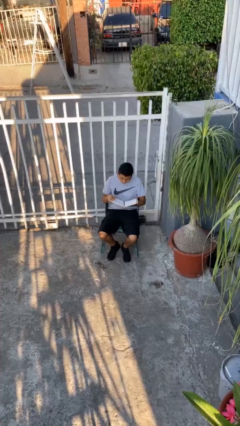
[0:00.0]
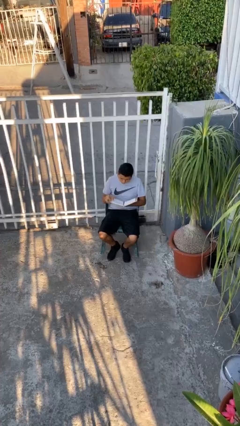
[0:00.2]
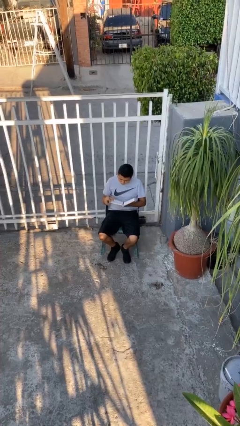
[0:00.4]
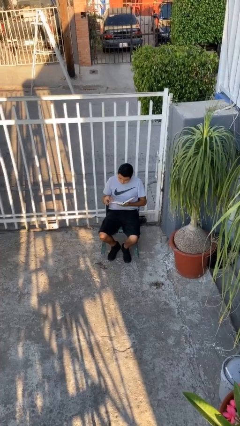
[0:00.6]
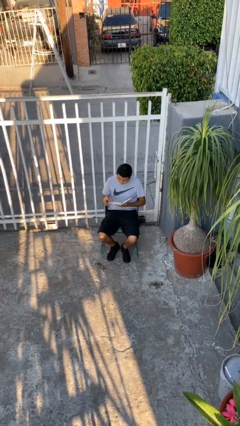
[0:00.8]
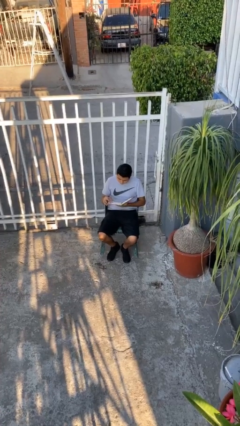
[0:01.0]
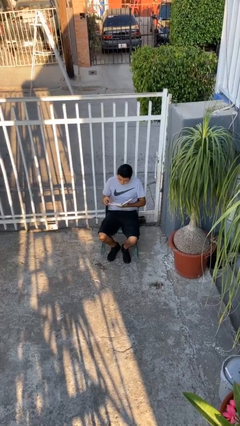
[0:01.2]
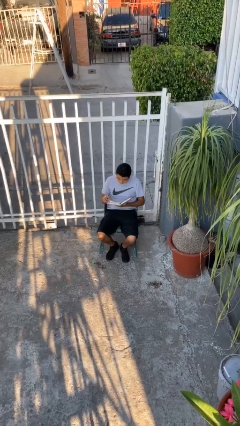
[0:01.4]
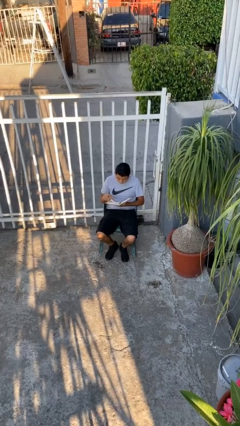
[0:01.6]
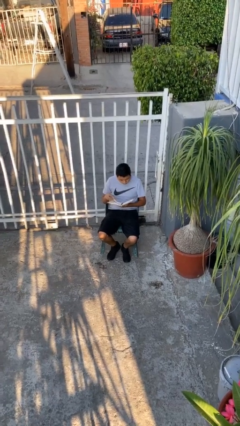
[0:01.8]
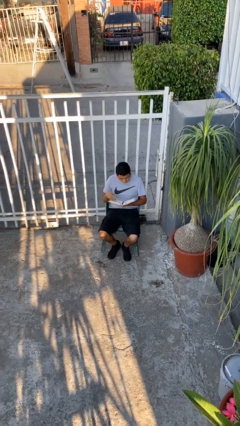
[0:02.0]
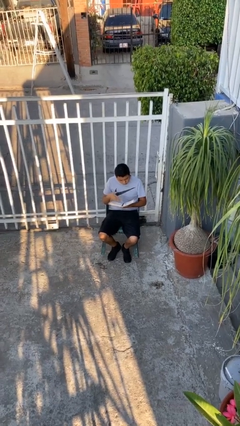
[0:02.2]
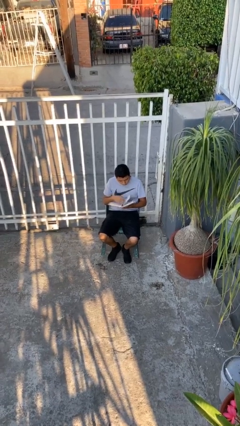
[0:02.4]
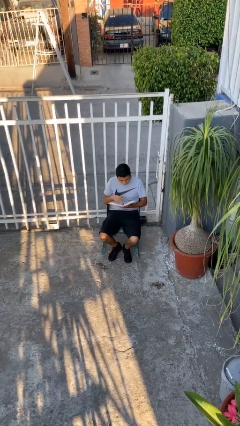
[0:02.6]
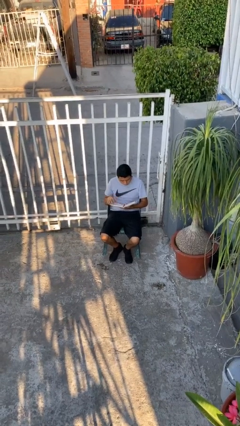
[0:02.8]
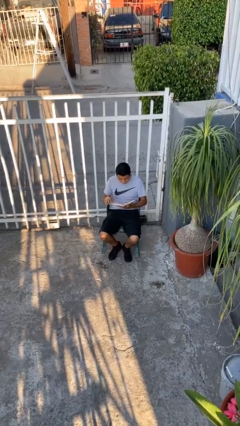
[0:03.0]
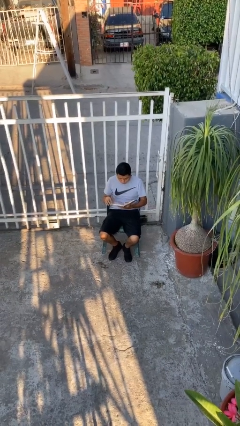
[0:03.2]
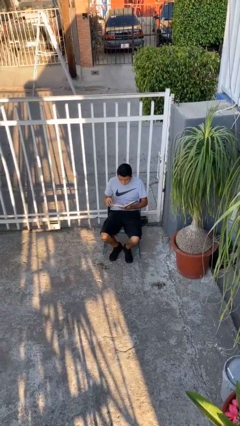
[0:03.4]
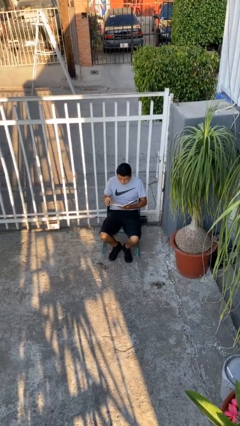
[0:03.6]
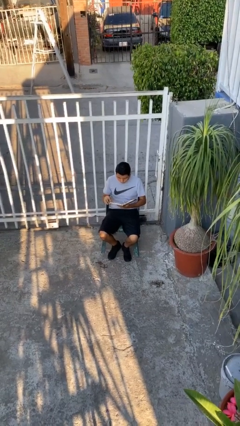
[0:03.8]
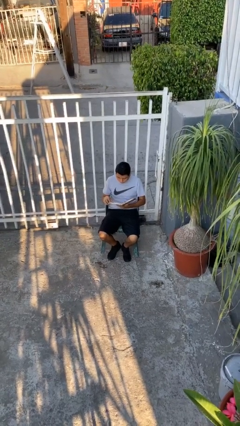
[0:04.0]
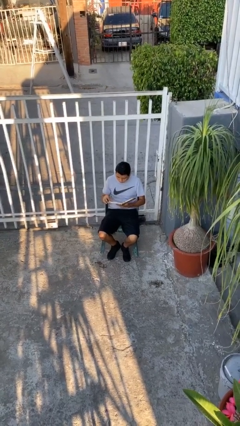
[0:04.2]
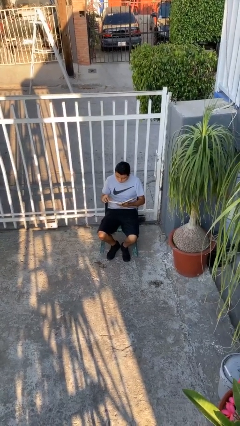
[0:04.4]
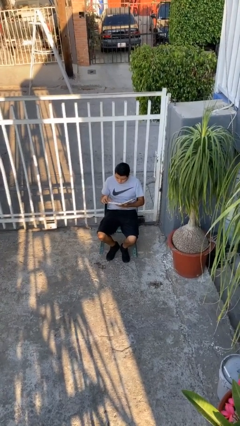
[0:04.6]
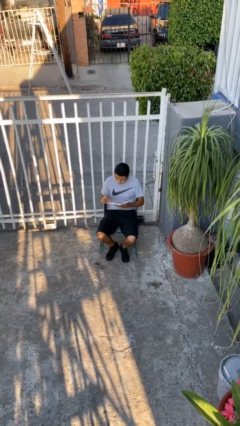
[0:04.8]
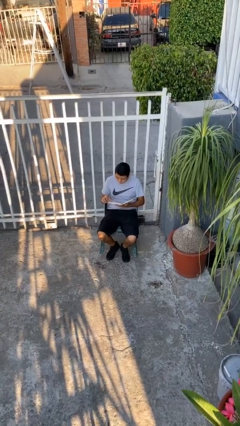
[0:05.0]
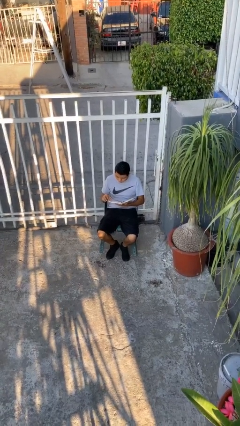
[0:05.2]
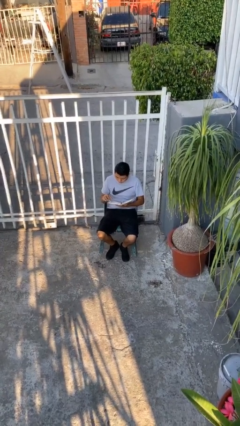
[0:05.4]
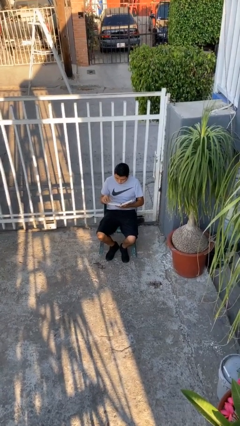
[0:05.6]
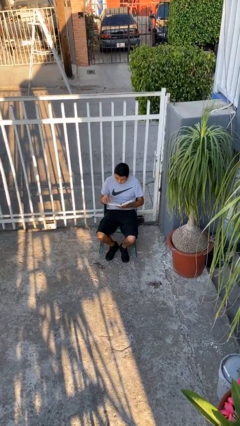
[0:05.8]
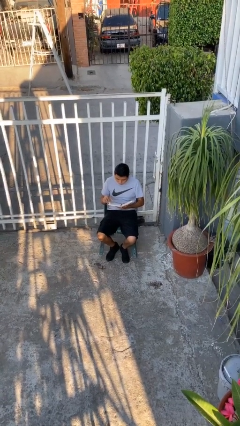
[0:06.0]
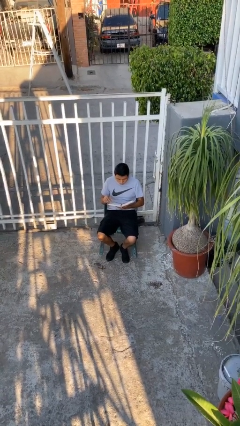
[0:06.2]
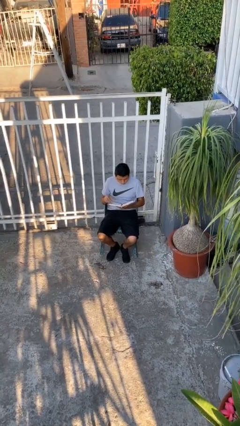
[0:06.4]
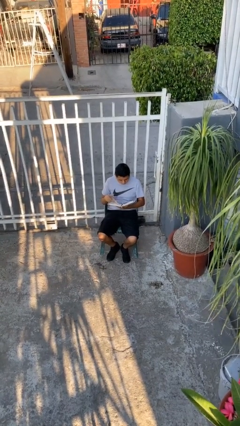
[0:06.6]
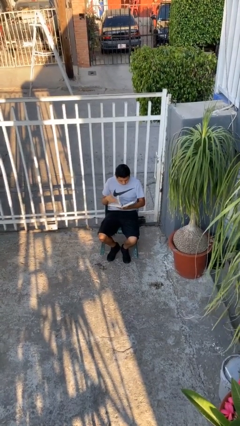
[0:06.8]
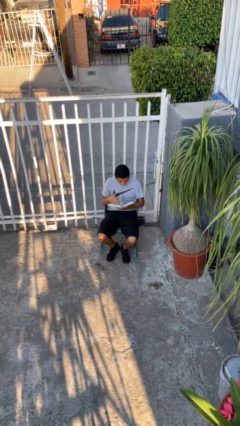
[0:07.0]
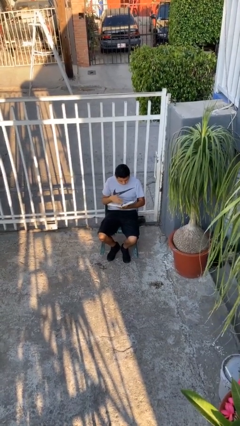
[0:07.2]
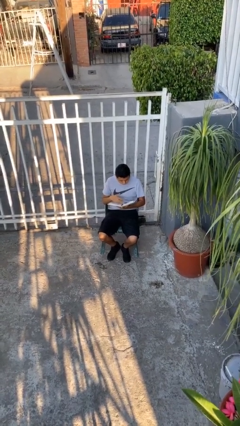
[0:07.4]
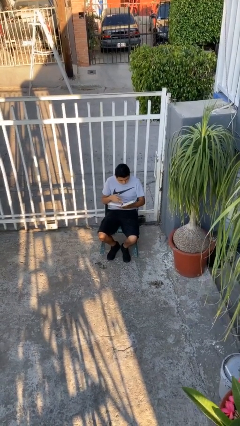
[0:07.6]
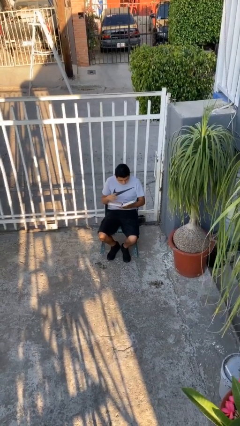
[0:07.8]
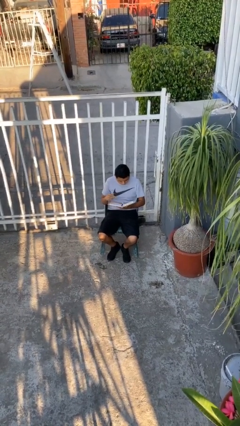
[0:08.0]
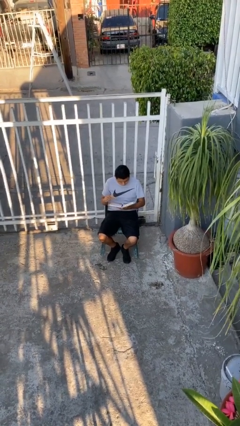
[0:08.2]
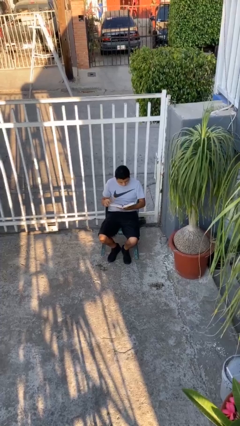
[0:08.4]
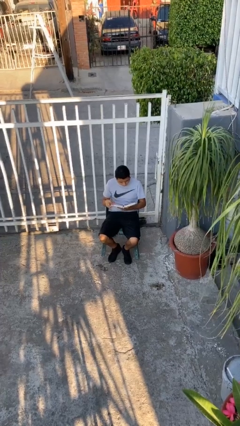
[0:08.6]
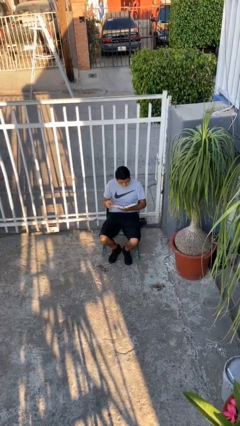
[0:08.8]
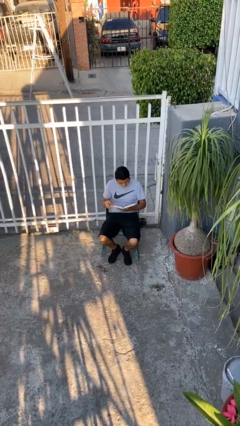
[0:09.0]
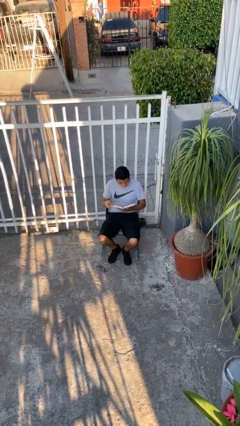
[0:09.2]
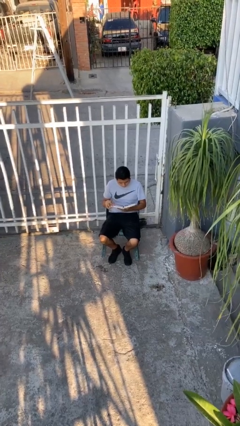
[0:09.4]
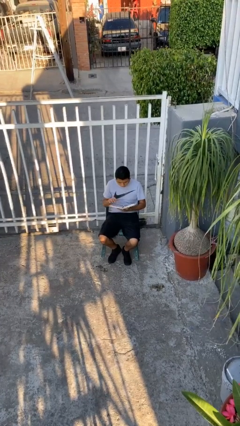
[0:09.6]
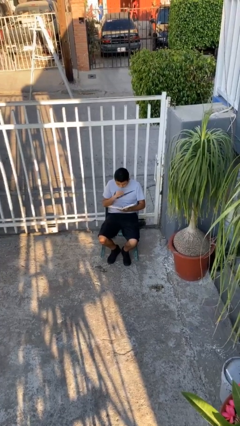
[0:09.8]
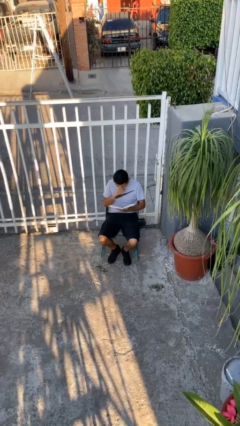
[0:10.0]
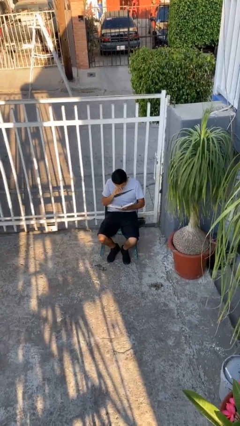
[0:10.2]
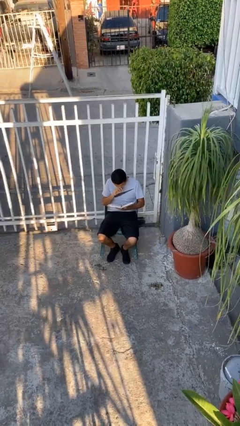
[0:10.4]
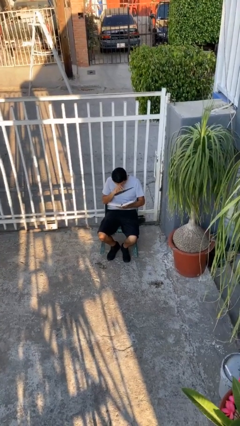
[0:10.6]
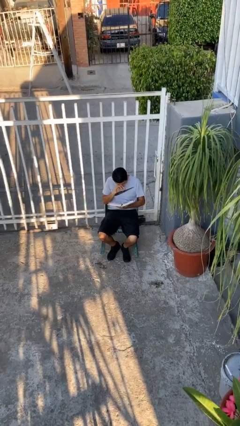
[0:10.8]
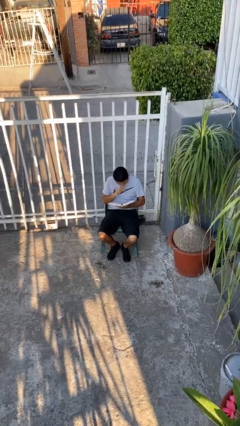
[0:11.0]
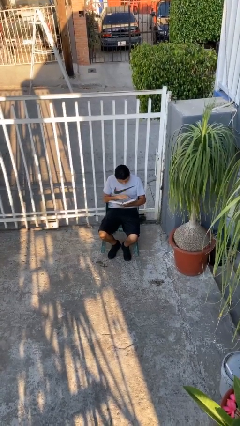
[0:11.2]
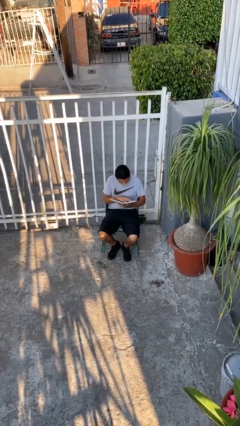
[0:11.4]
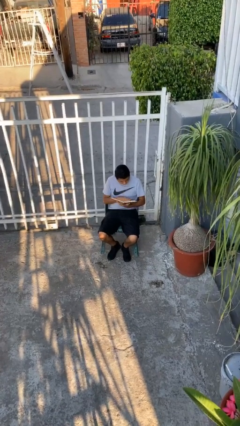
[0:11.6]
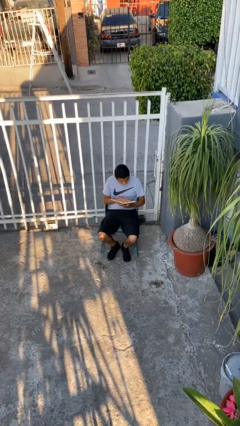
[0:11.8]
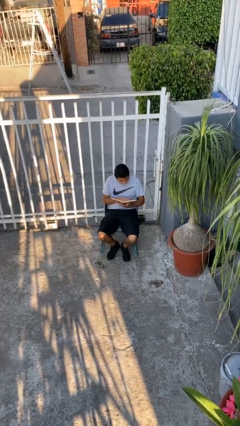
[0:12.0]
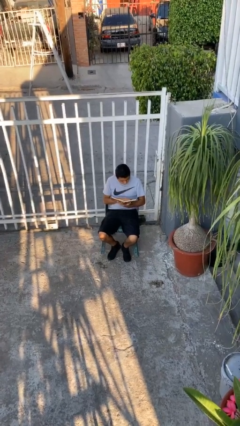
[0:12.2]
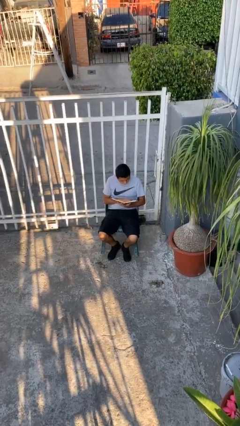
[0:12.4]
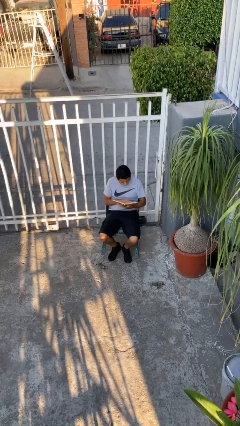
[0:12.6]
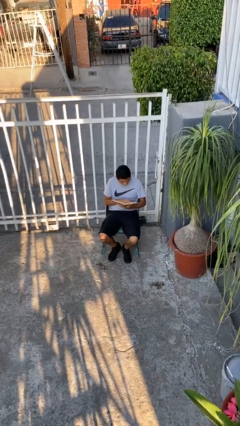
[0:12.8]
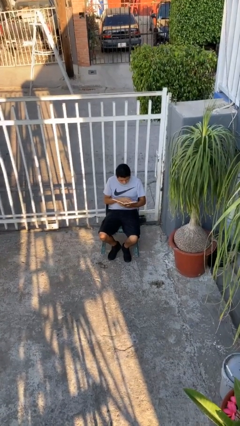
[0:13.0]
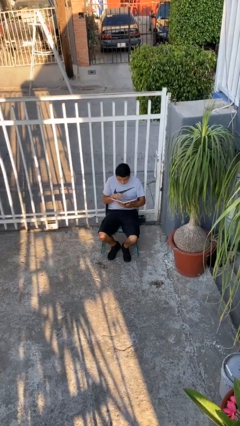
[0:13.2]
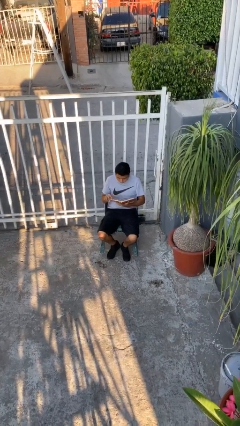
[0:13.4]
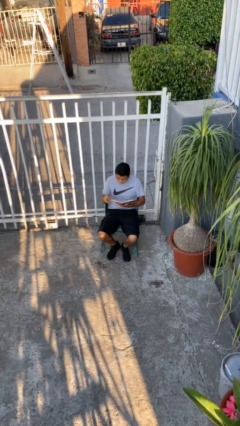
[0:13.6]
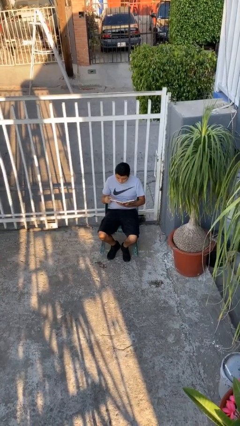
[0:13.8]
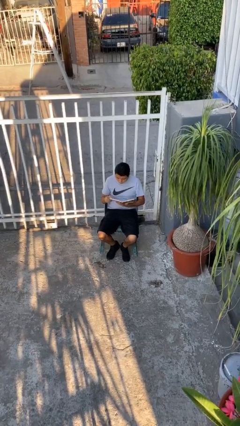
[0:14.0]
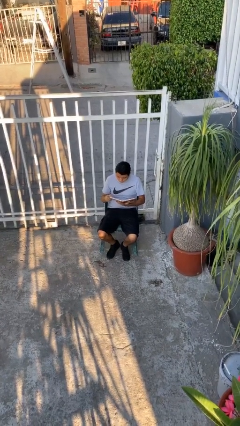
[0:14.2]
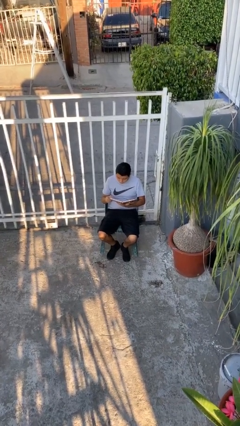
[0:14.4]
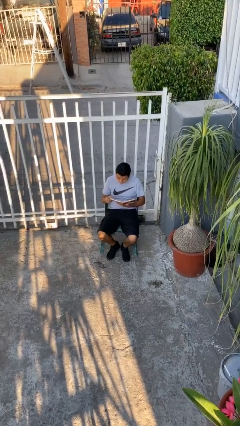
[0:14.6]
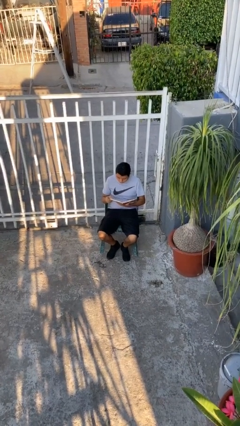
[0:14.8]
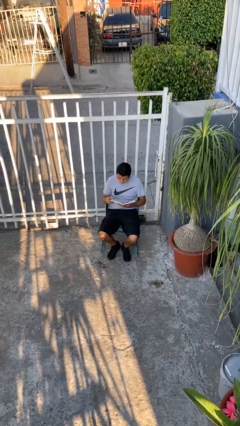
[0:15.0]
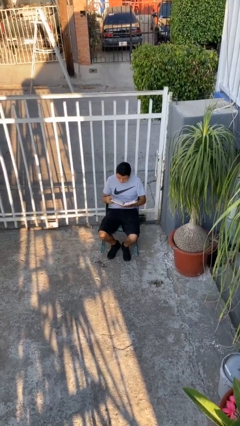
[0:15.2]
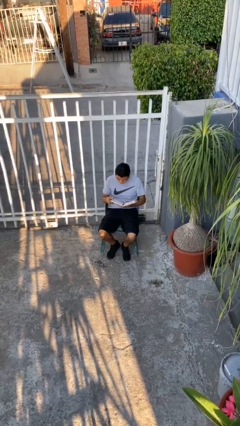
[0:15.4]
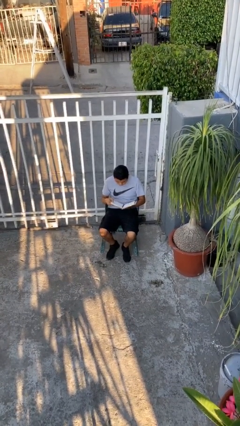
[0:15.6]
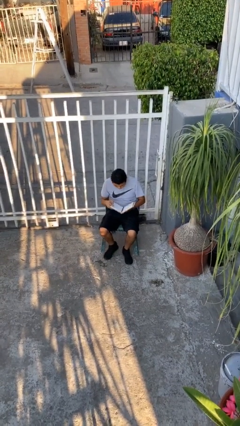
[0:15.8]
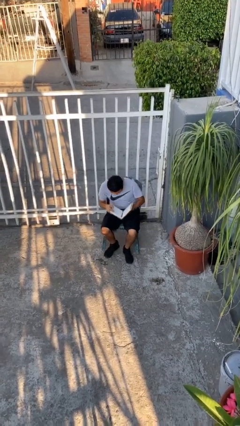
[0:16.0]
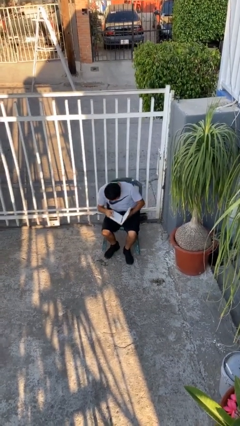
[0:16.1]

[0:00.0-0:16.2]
person reads document

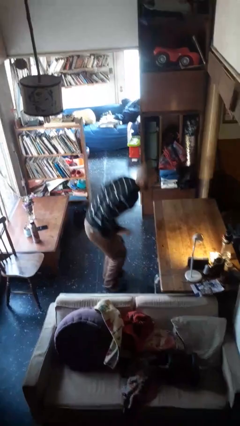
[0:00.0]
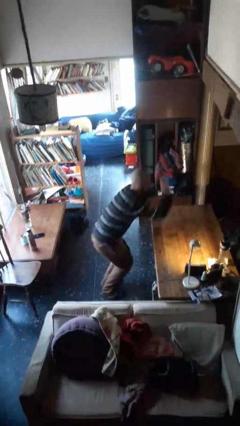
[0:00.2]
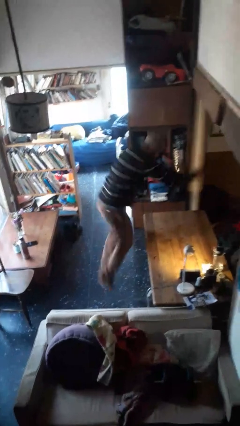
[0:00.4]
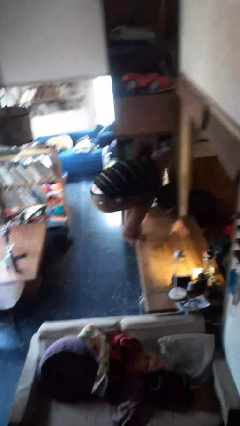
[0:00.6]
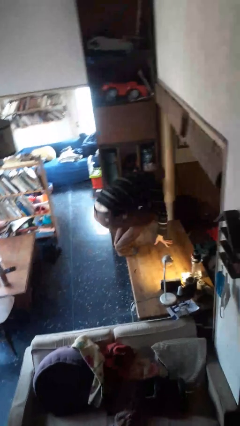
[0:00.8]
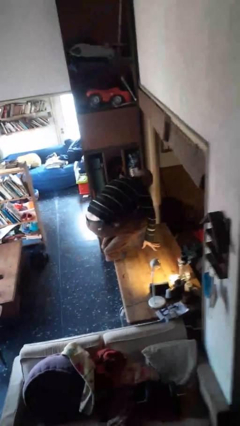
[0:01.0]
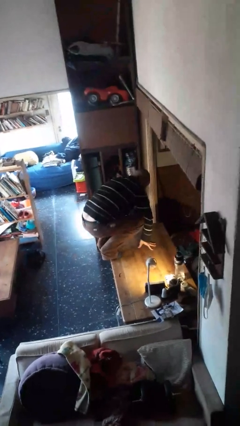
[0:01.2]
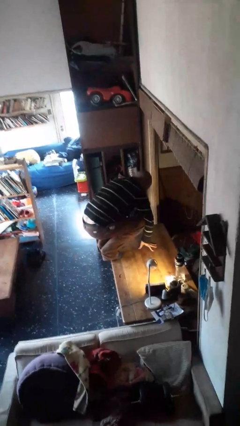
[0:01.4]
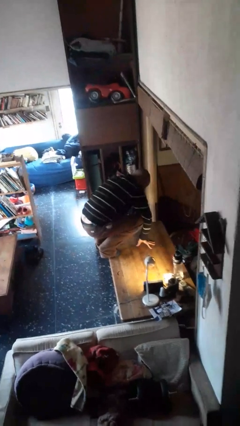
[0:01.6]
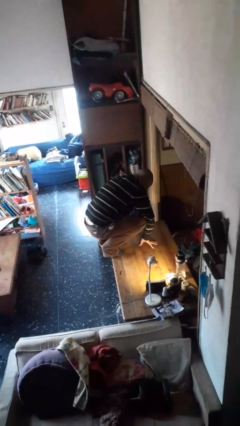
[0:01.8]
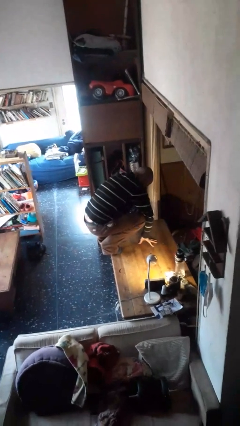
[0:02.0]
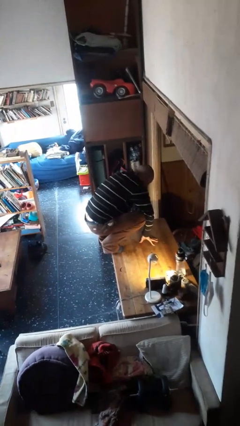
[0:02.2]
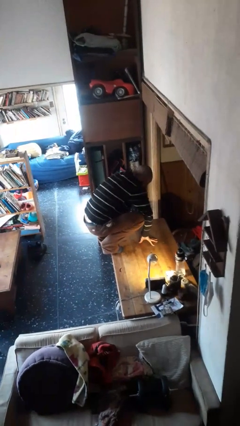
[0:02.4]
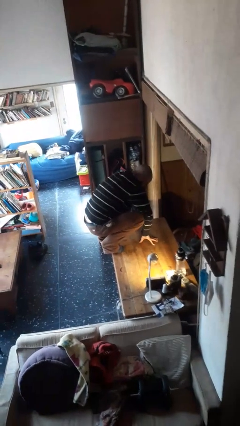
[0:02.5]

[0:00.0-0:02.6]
person climbs on table
